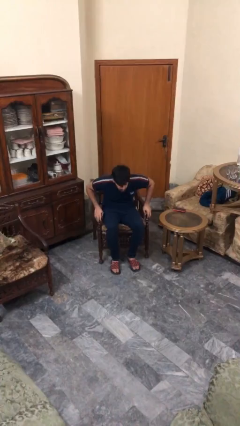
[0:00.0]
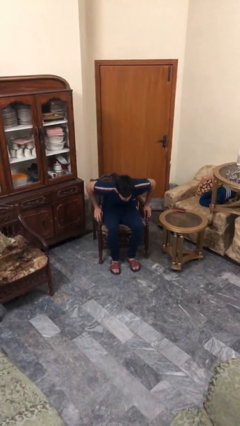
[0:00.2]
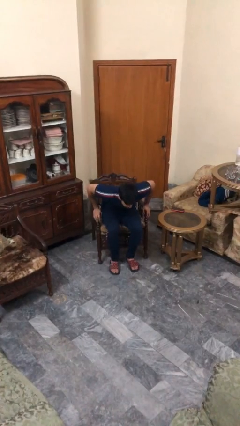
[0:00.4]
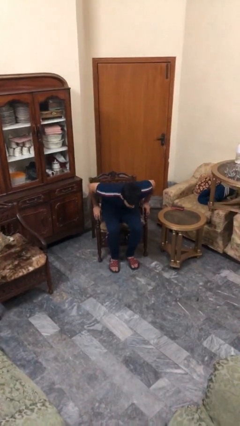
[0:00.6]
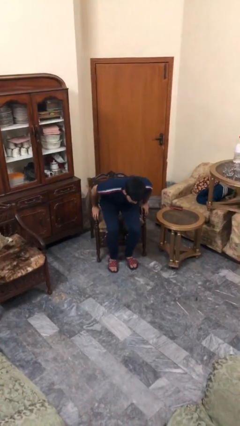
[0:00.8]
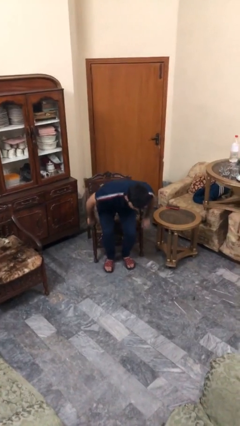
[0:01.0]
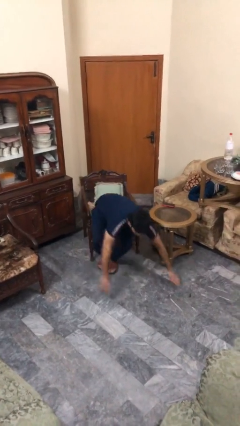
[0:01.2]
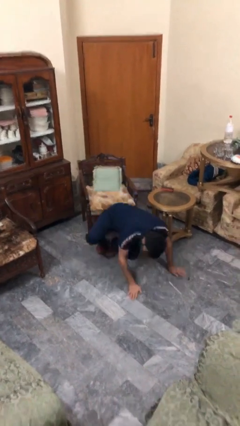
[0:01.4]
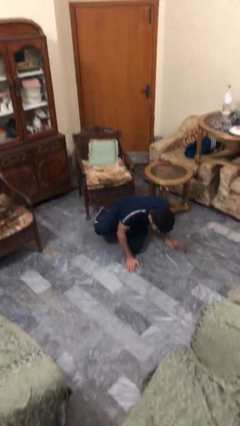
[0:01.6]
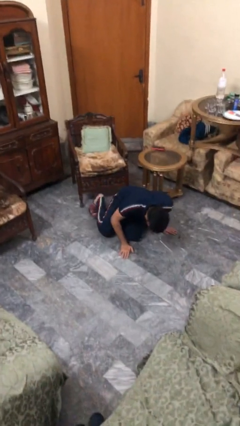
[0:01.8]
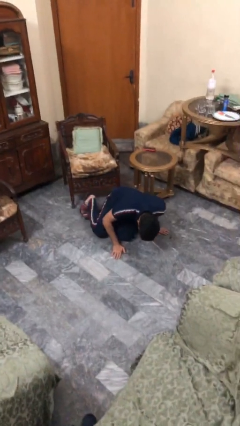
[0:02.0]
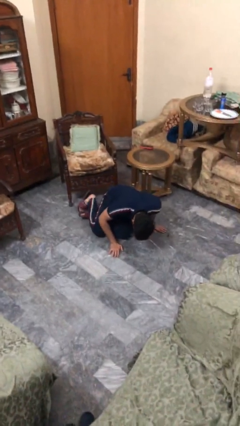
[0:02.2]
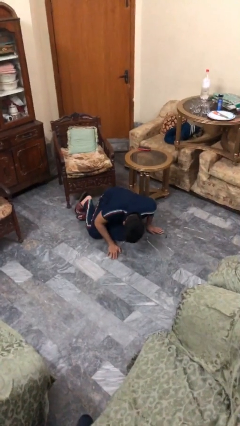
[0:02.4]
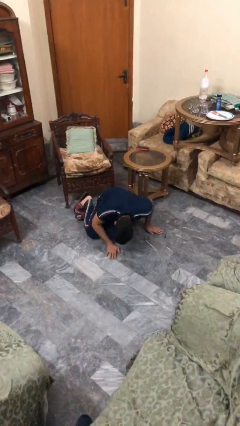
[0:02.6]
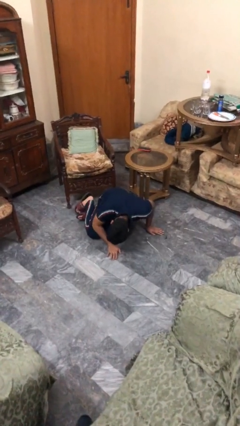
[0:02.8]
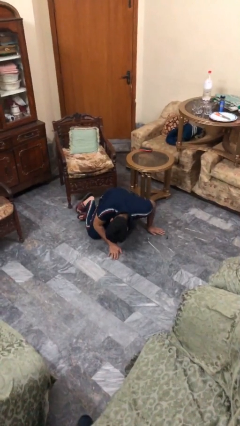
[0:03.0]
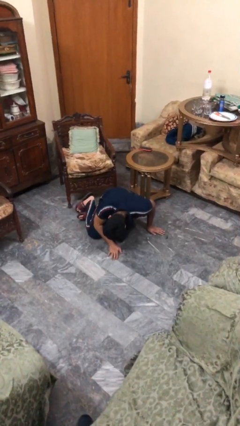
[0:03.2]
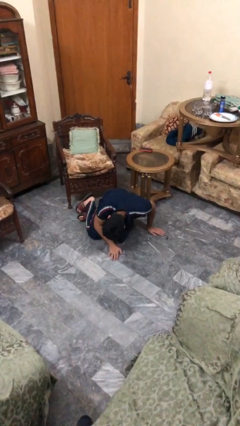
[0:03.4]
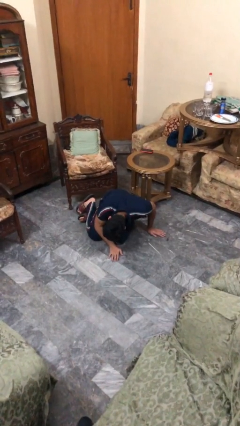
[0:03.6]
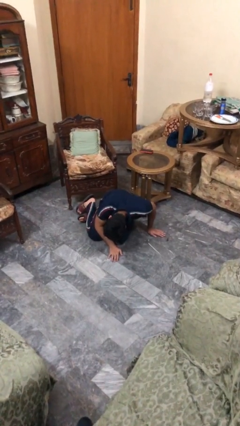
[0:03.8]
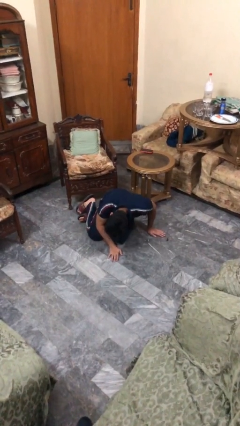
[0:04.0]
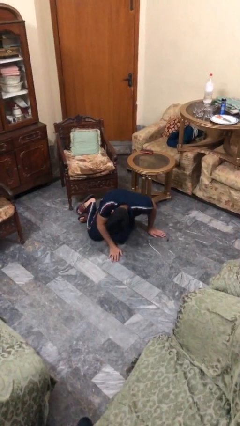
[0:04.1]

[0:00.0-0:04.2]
person falls from chair

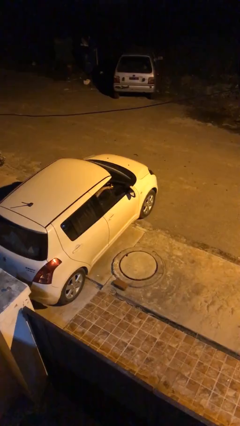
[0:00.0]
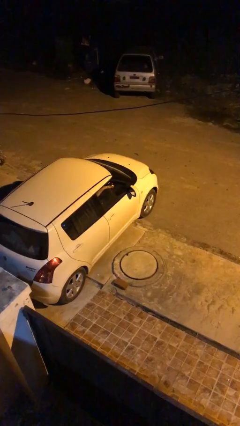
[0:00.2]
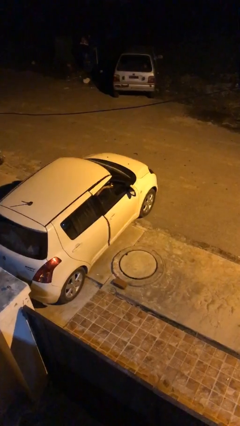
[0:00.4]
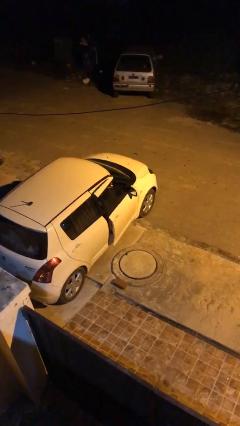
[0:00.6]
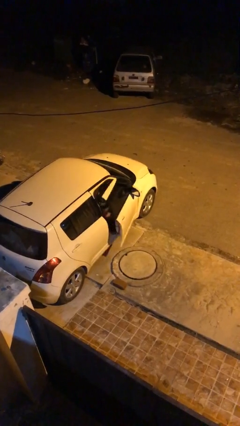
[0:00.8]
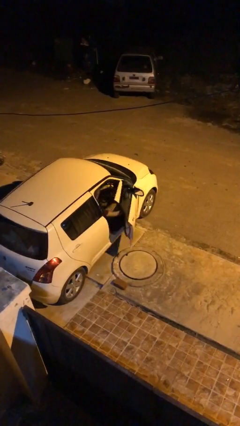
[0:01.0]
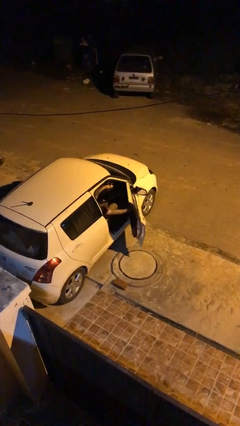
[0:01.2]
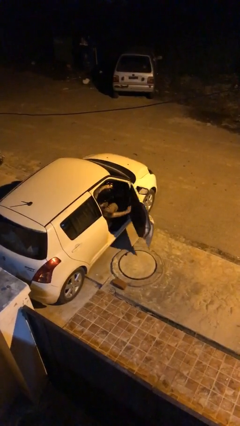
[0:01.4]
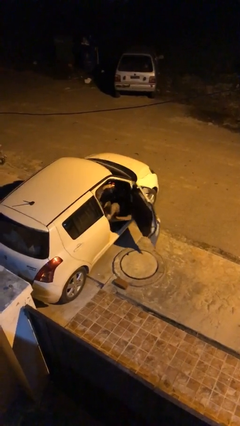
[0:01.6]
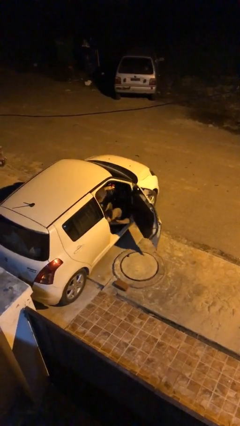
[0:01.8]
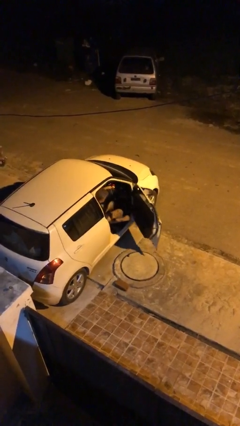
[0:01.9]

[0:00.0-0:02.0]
person opens car door

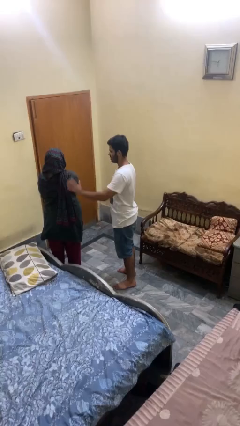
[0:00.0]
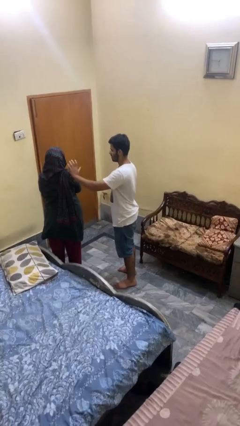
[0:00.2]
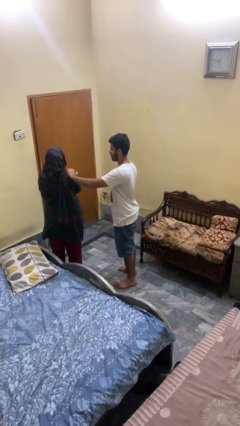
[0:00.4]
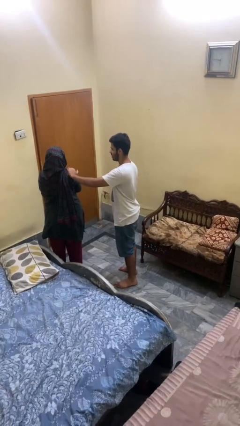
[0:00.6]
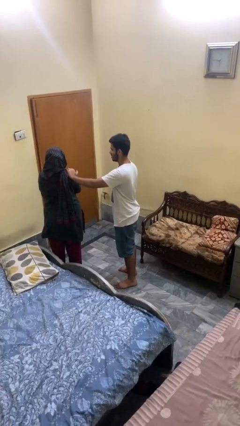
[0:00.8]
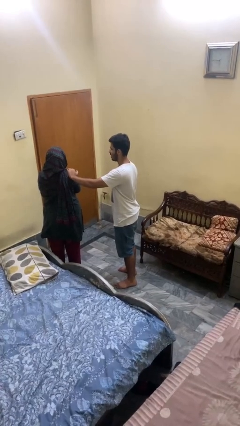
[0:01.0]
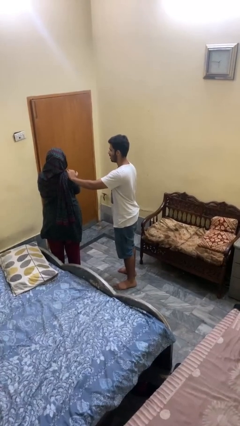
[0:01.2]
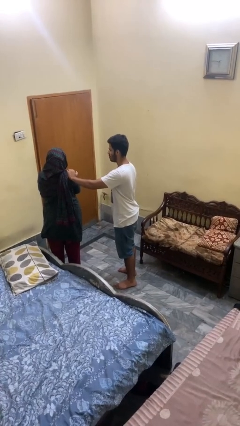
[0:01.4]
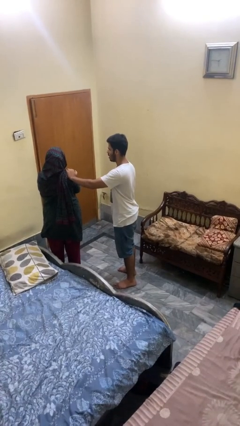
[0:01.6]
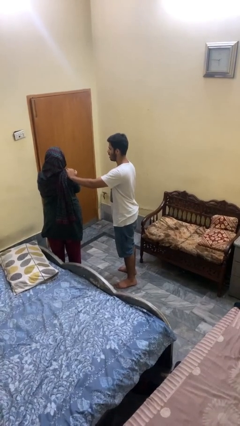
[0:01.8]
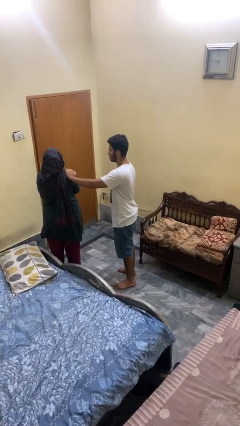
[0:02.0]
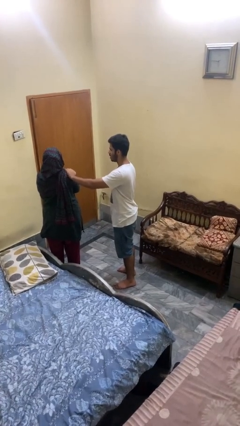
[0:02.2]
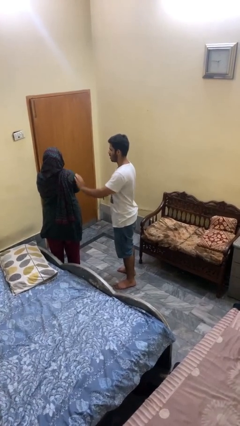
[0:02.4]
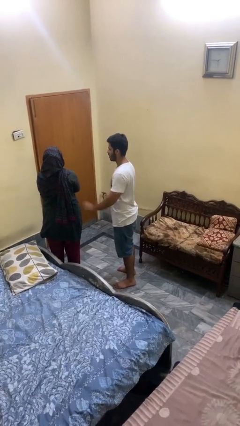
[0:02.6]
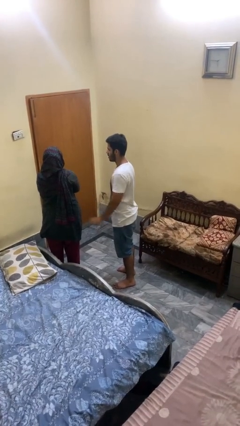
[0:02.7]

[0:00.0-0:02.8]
person pounds shoulders of person

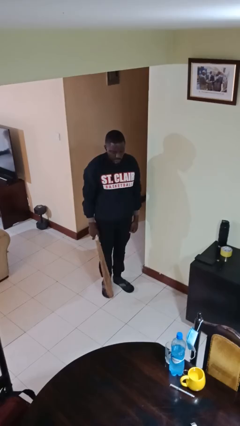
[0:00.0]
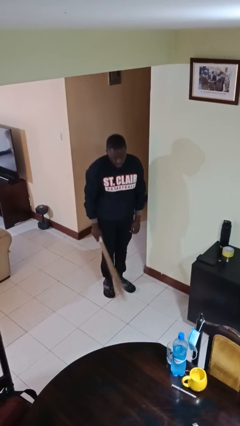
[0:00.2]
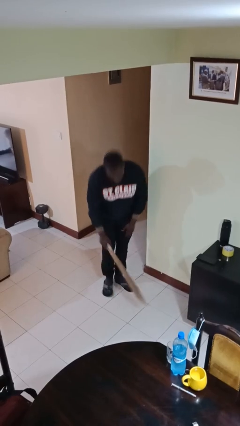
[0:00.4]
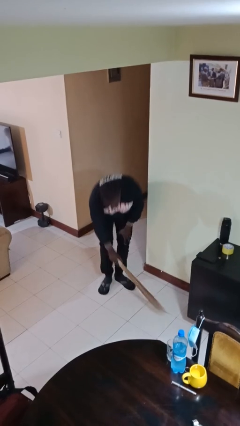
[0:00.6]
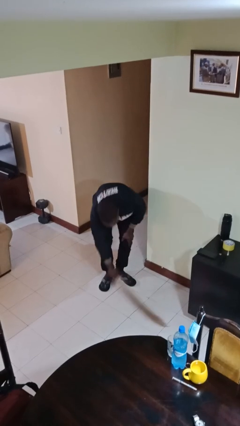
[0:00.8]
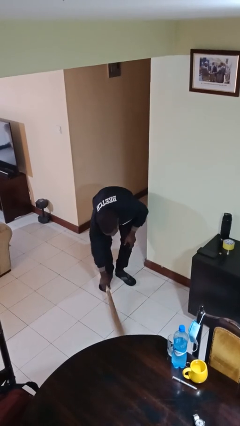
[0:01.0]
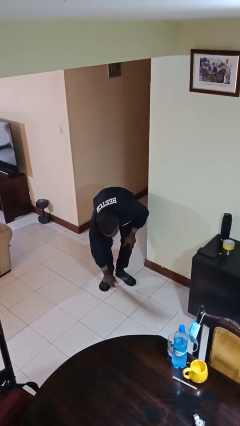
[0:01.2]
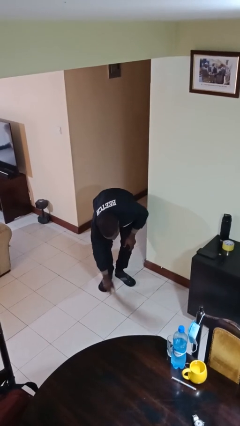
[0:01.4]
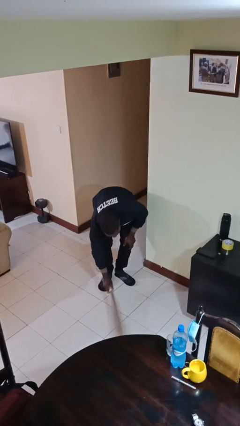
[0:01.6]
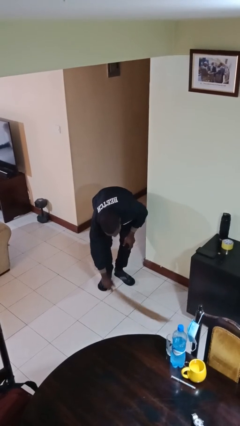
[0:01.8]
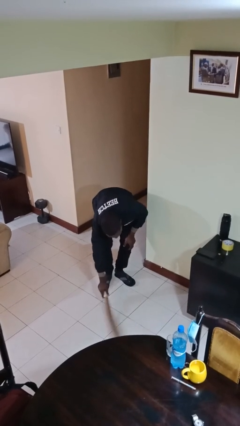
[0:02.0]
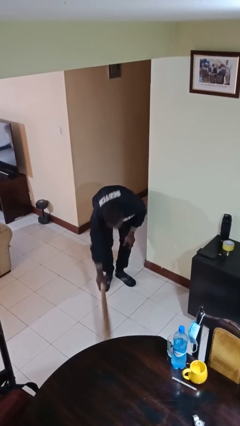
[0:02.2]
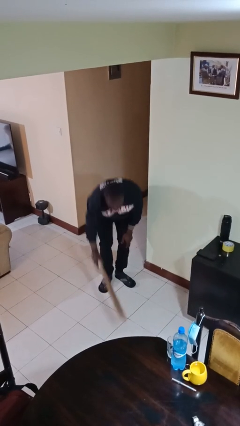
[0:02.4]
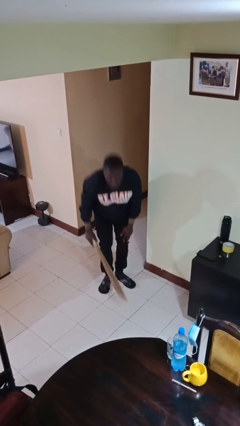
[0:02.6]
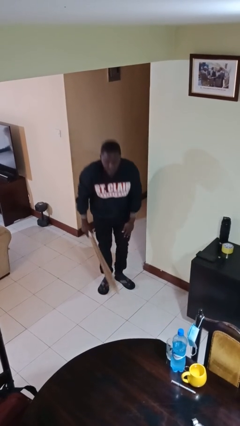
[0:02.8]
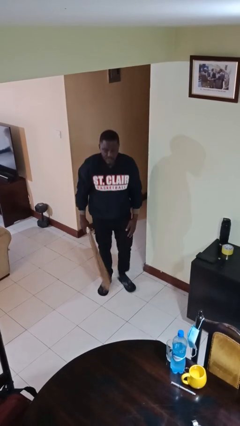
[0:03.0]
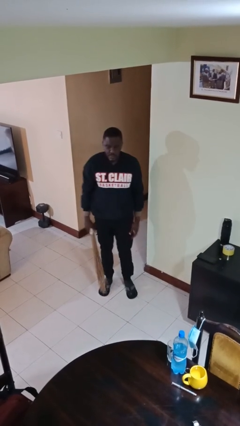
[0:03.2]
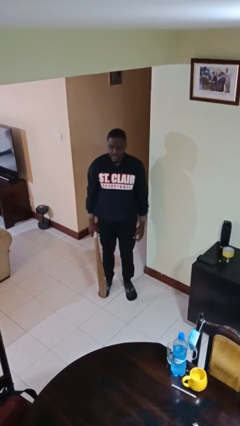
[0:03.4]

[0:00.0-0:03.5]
person sweeps floor

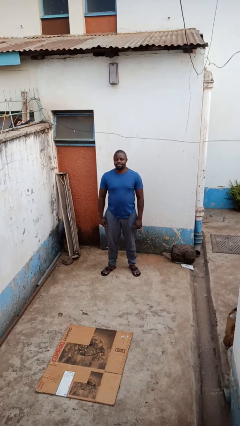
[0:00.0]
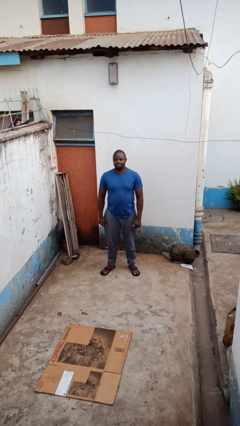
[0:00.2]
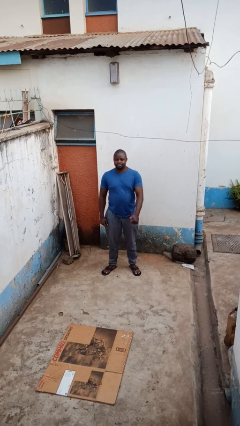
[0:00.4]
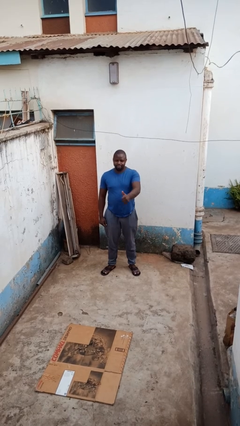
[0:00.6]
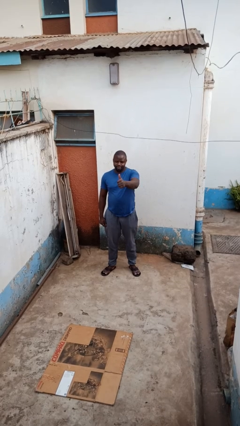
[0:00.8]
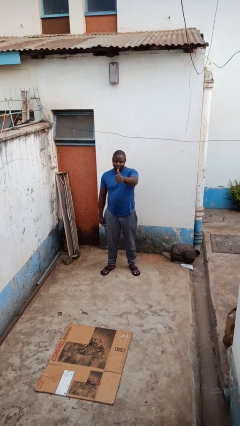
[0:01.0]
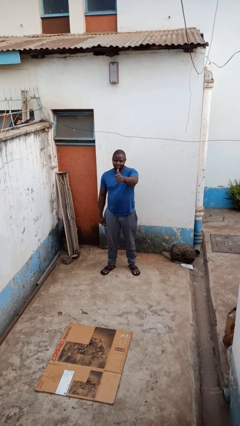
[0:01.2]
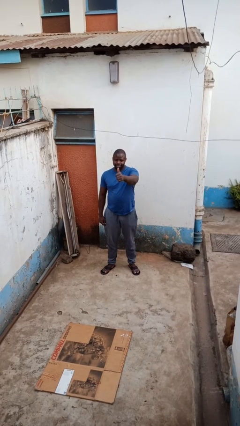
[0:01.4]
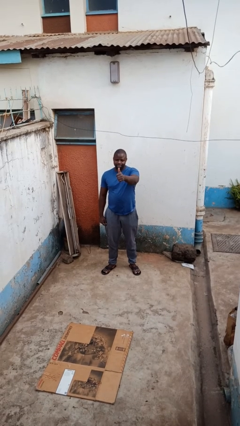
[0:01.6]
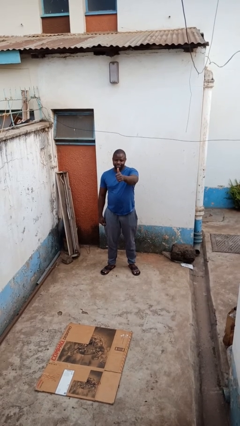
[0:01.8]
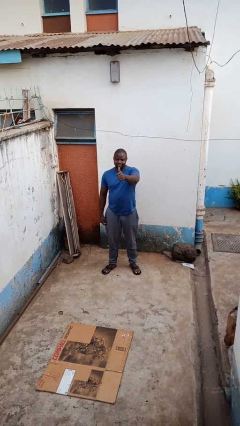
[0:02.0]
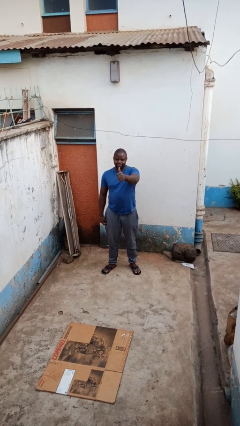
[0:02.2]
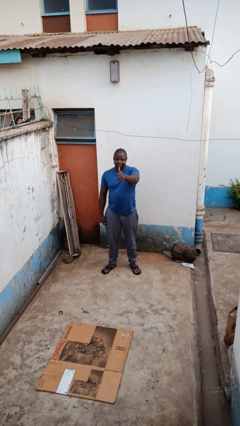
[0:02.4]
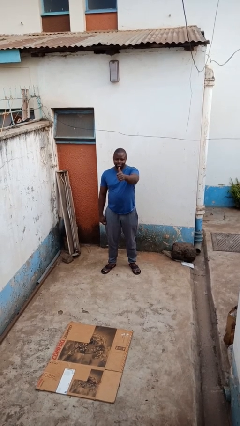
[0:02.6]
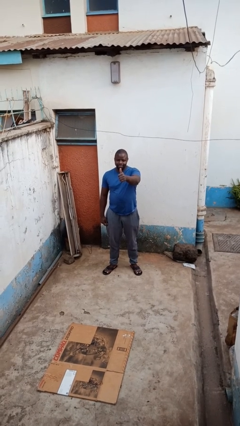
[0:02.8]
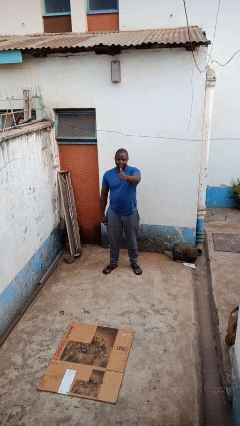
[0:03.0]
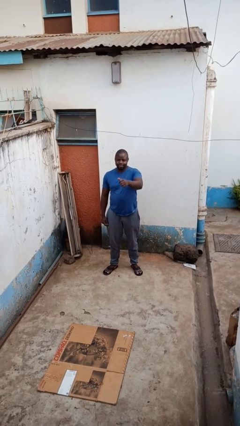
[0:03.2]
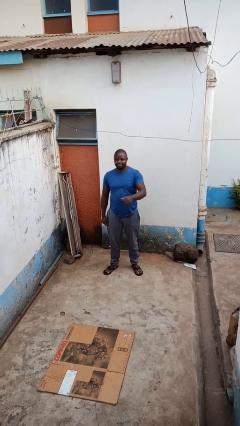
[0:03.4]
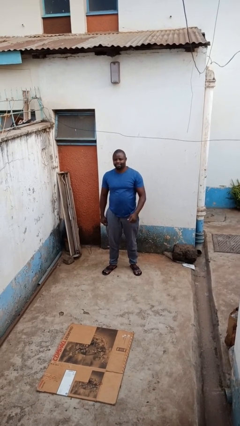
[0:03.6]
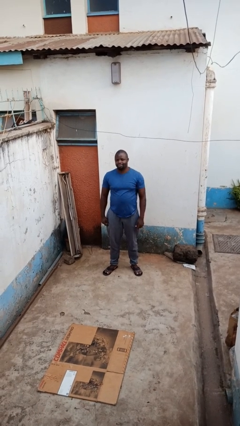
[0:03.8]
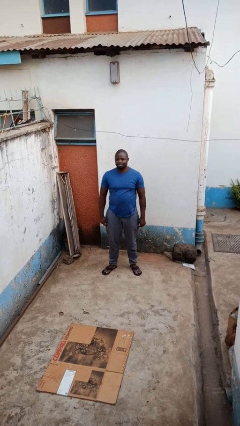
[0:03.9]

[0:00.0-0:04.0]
person gestures thumbs up

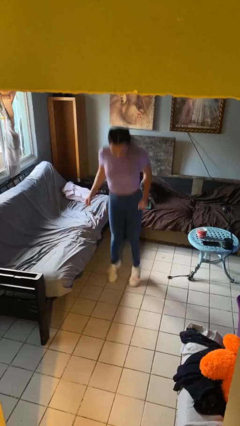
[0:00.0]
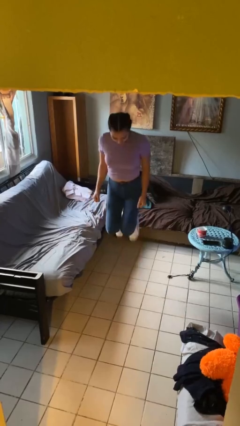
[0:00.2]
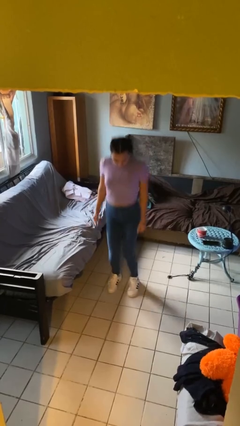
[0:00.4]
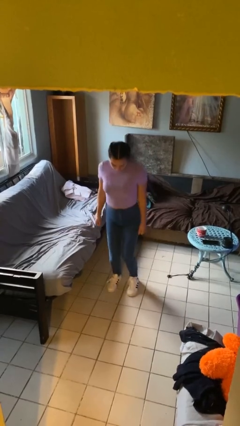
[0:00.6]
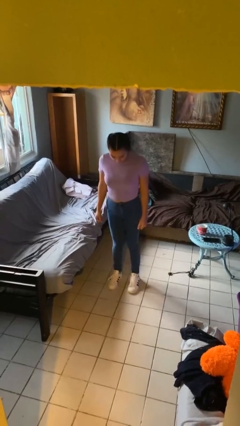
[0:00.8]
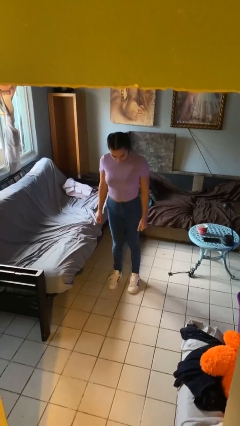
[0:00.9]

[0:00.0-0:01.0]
person jumps

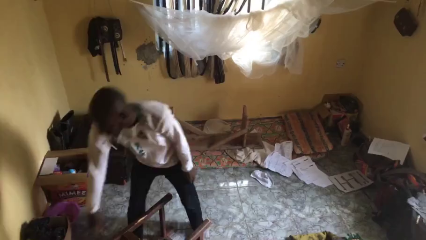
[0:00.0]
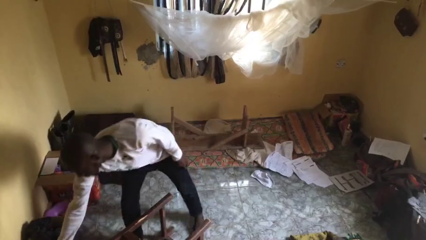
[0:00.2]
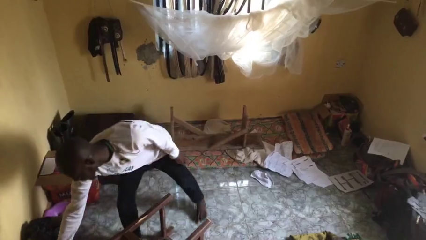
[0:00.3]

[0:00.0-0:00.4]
person sets upright furniture
